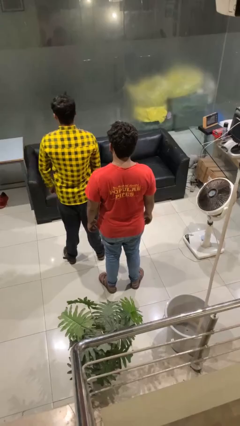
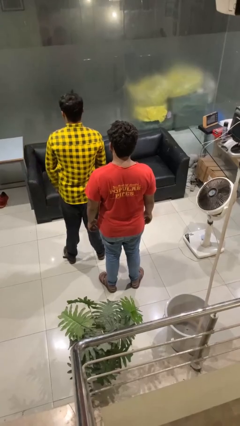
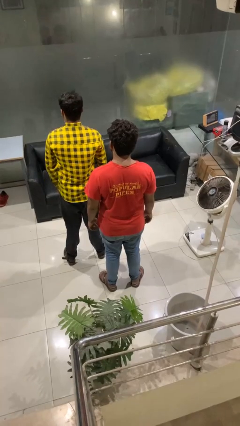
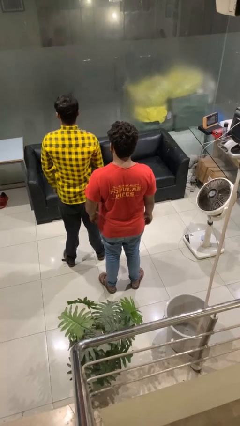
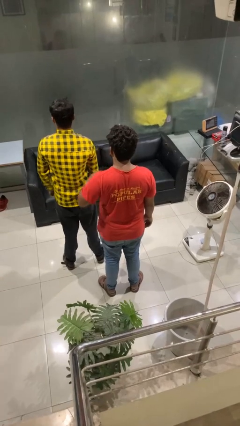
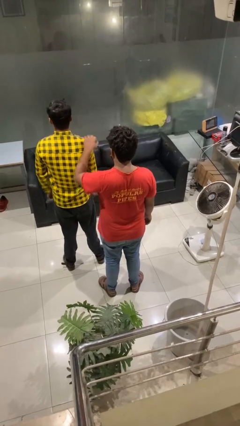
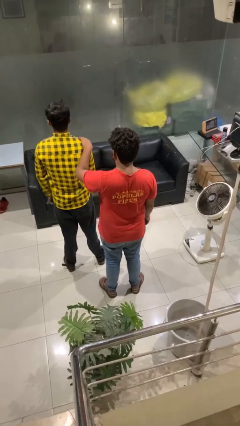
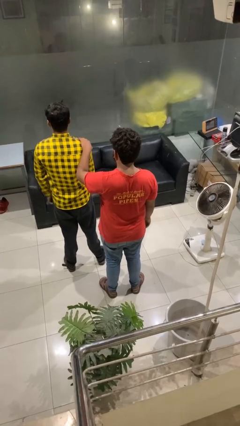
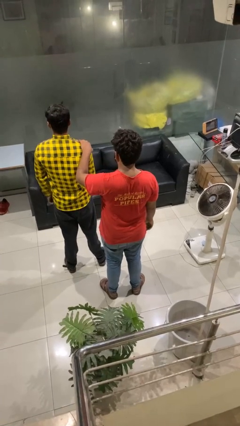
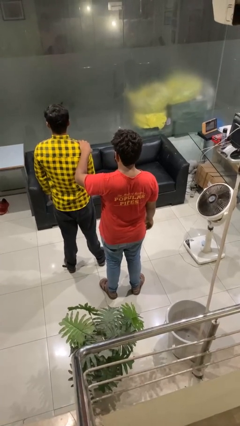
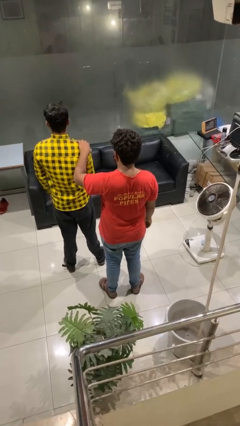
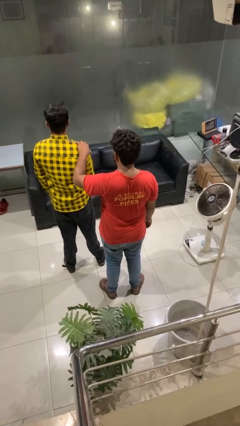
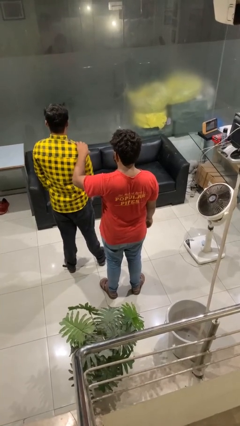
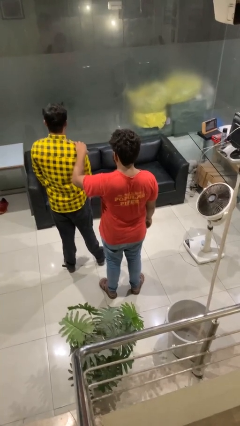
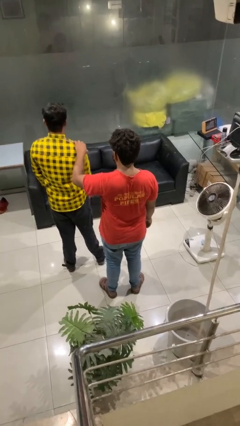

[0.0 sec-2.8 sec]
person grabs person by shoulder

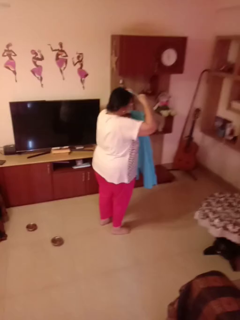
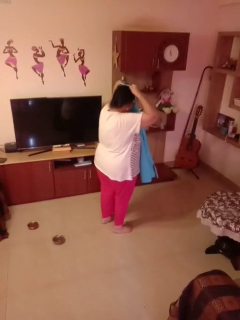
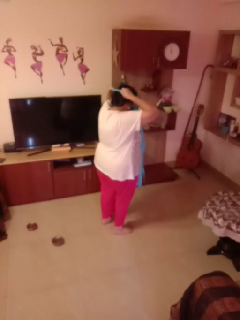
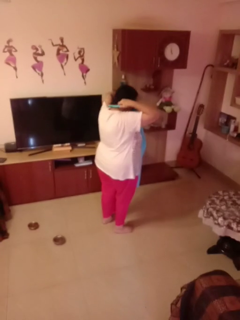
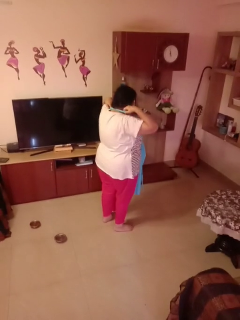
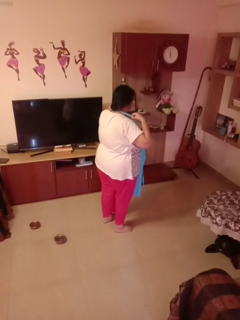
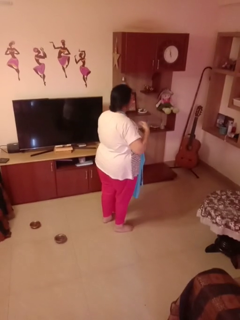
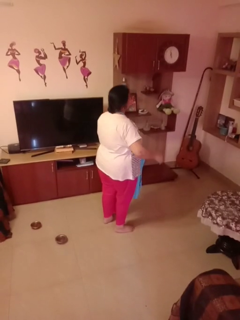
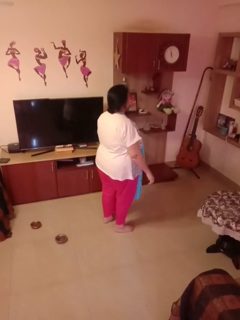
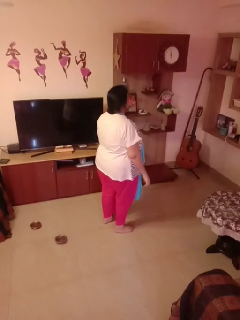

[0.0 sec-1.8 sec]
person puts on apron

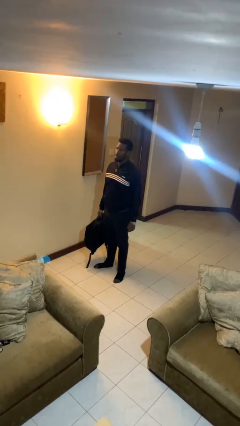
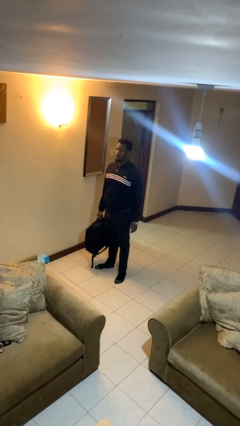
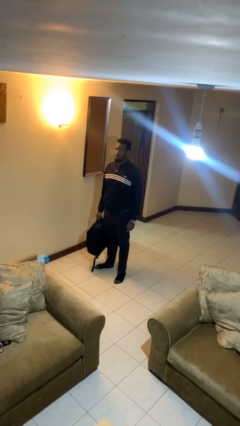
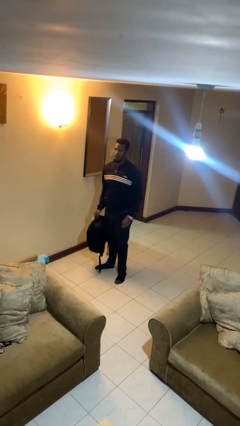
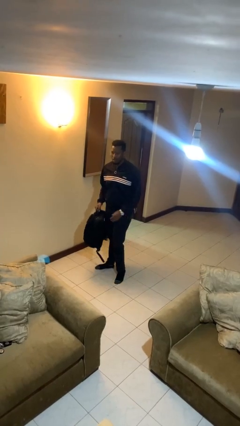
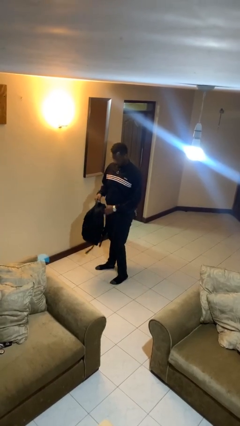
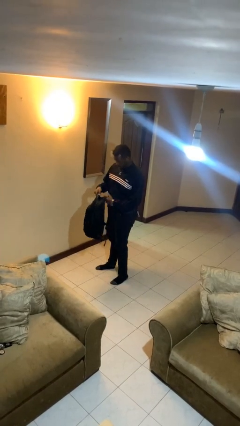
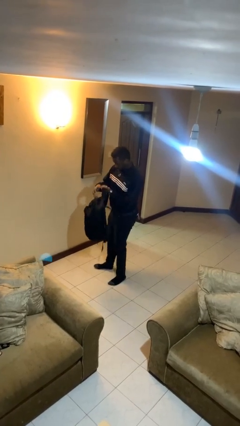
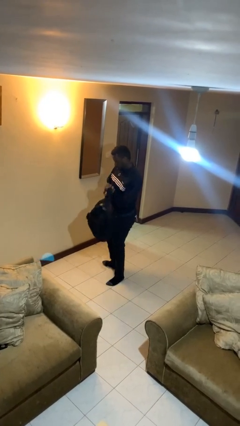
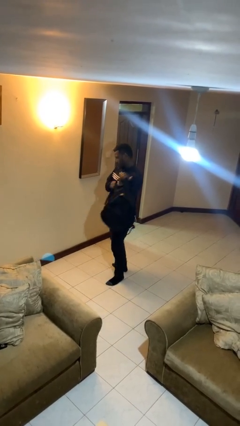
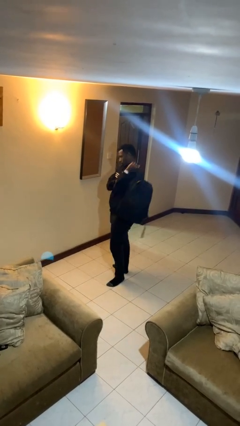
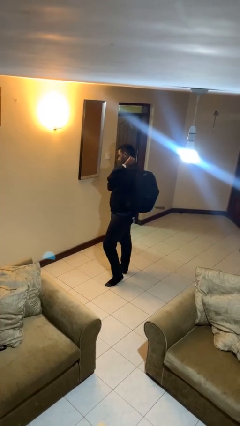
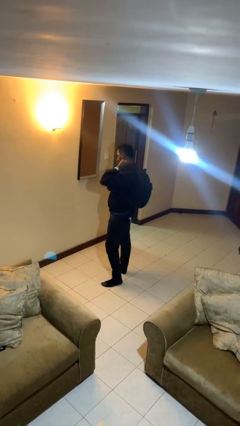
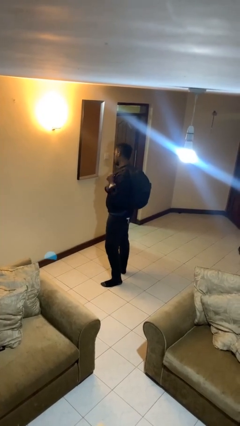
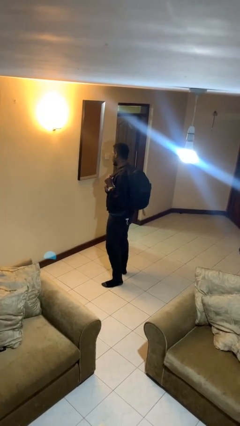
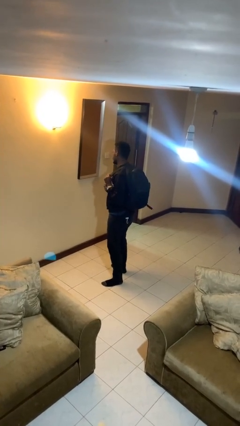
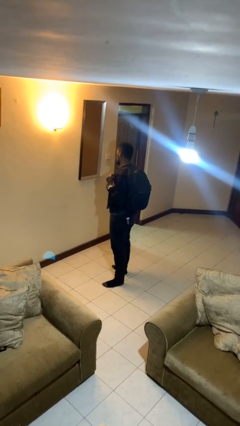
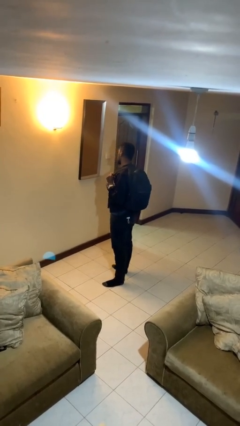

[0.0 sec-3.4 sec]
person puts on backpack

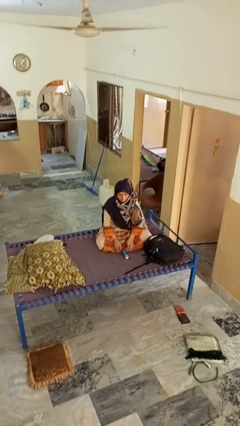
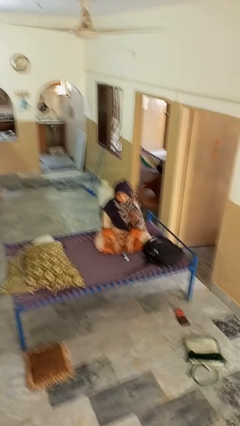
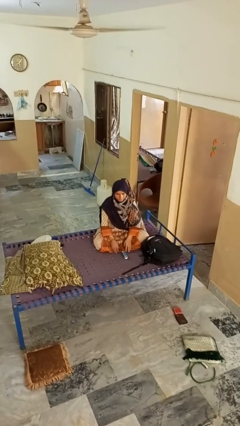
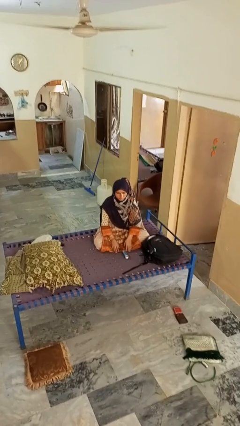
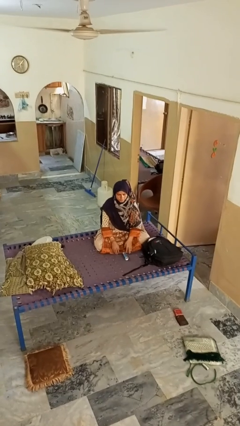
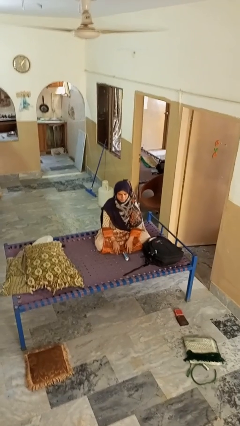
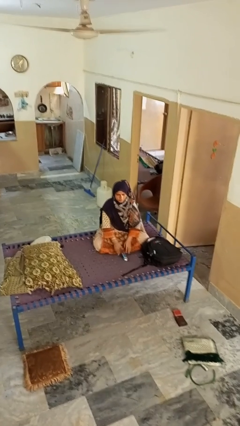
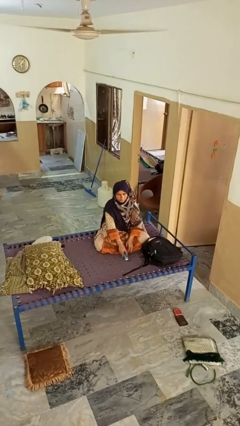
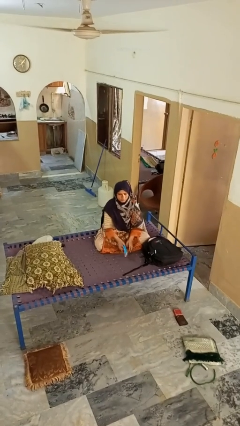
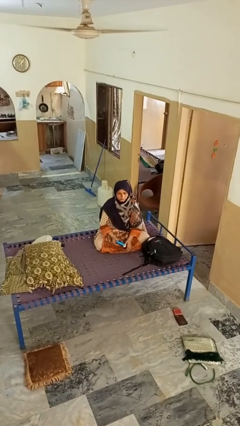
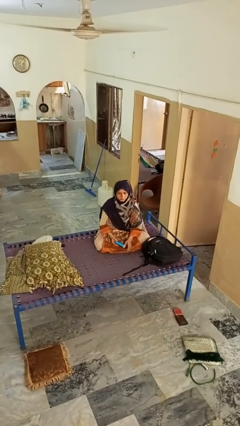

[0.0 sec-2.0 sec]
person picks up object from floor

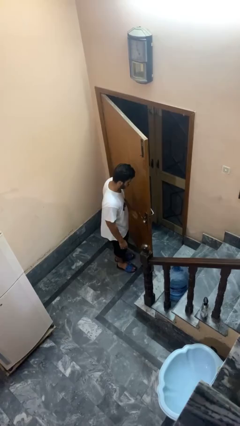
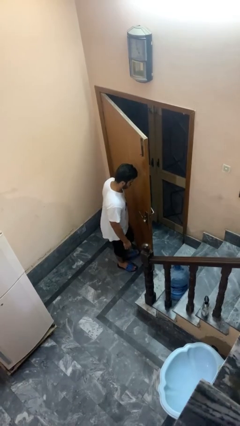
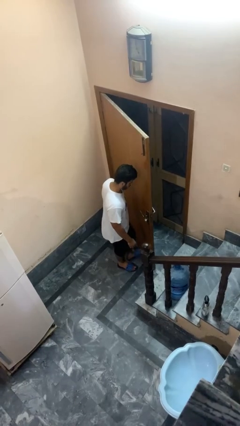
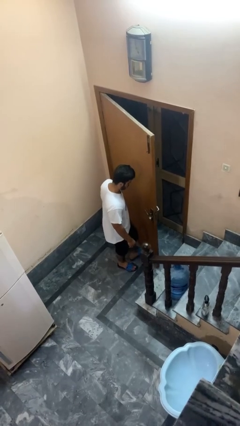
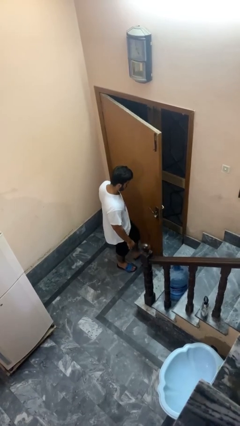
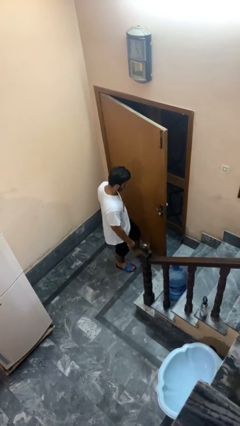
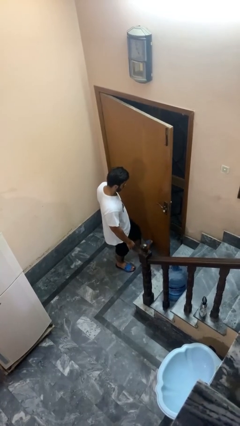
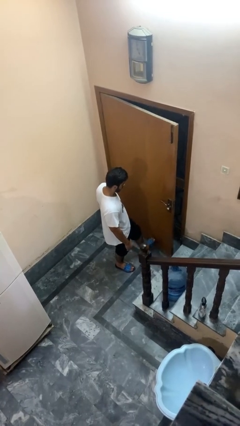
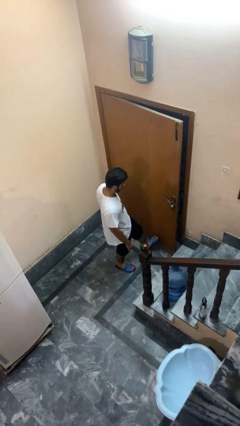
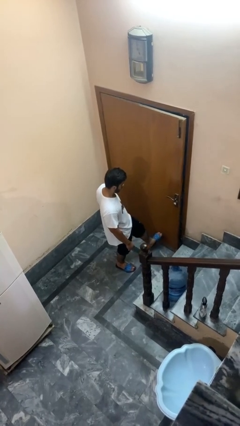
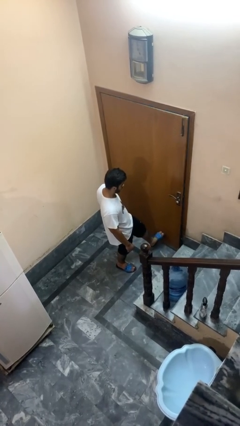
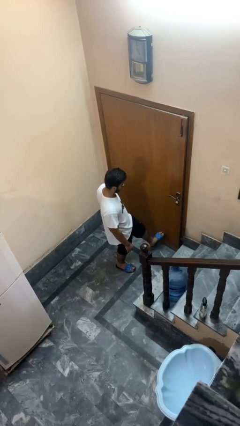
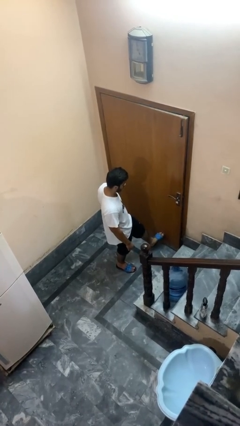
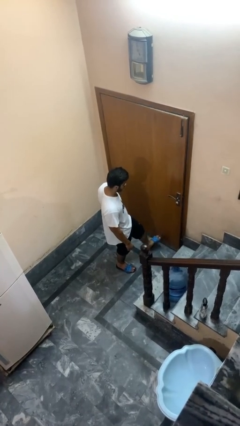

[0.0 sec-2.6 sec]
person closes door with foot

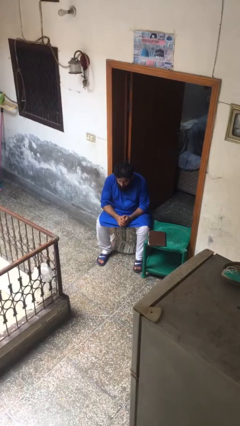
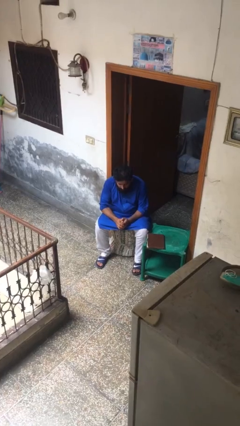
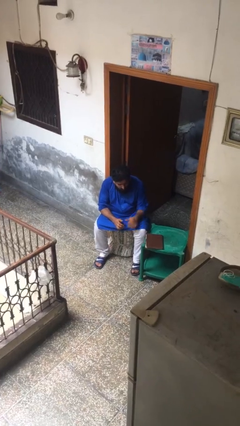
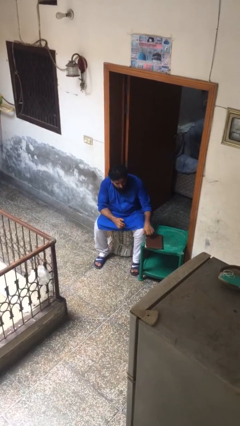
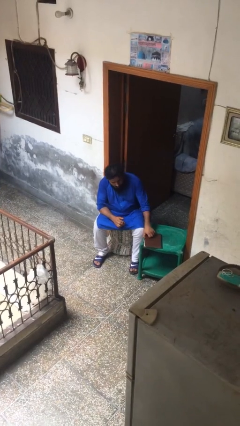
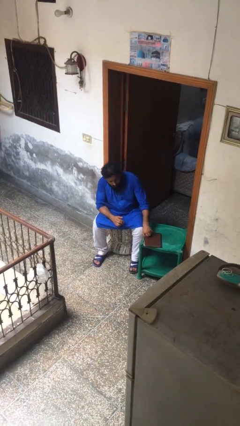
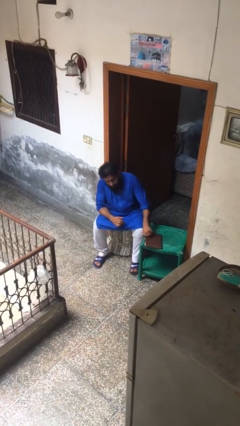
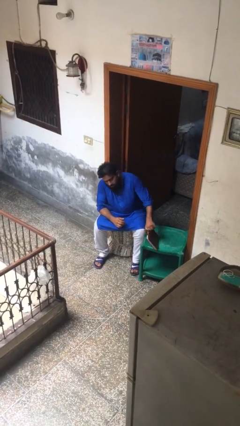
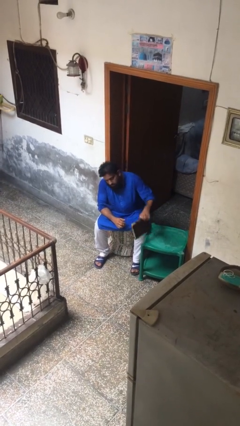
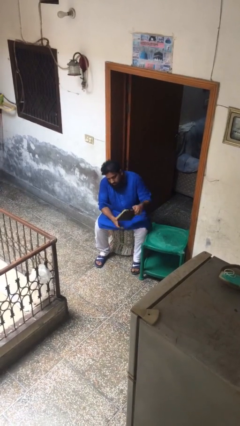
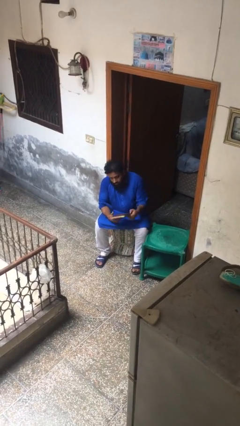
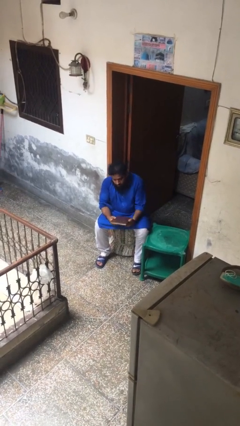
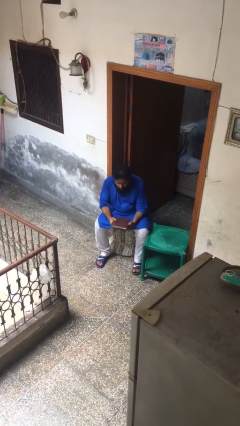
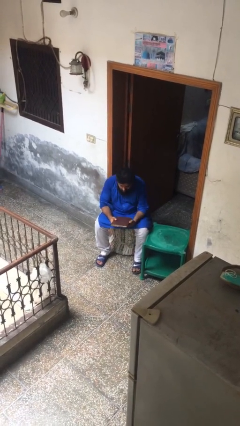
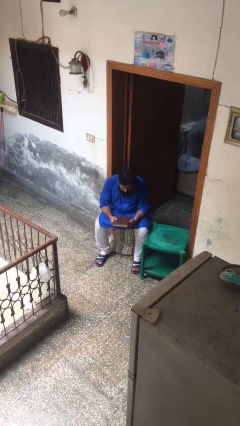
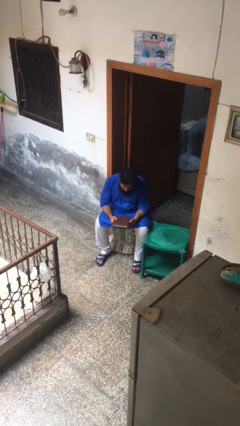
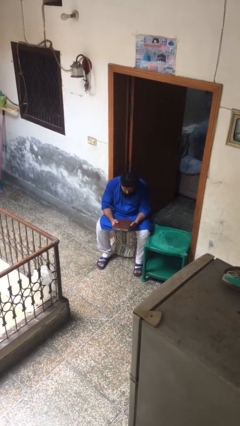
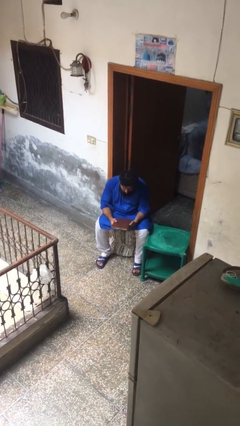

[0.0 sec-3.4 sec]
person picks up object from table

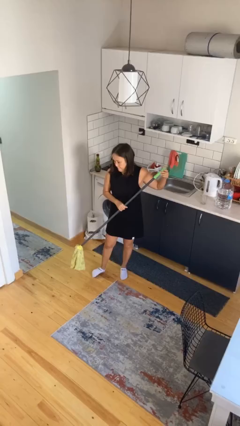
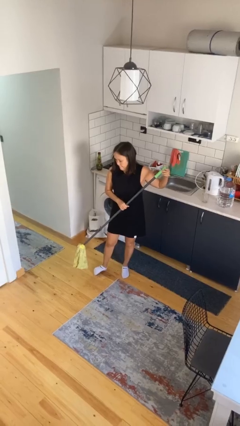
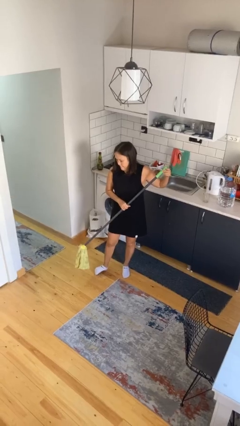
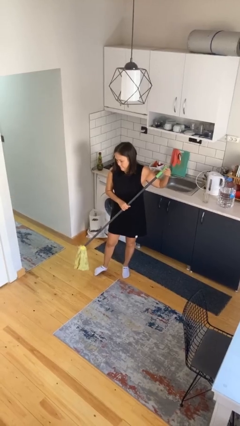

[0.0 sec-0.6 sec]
person sweeps floor

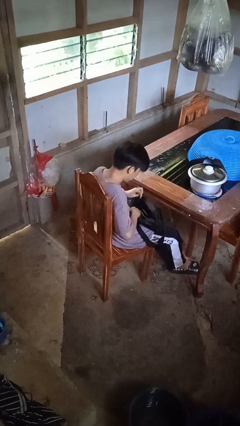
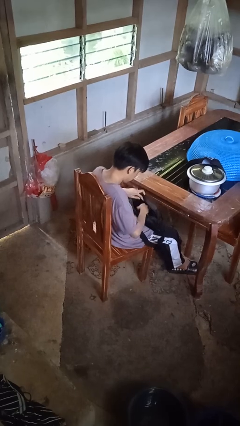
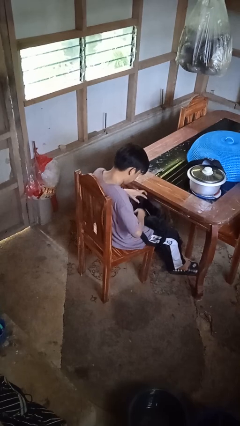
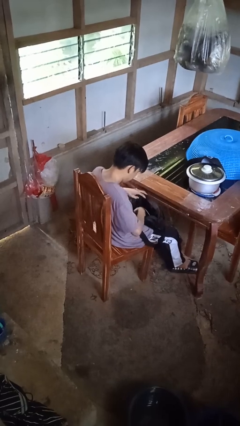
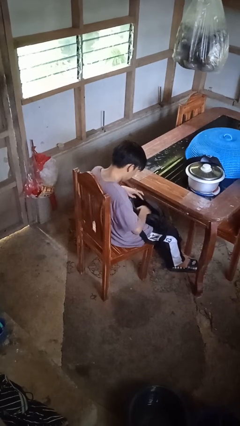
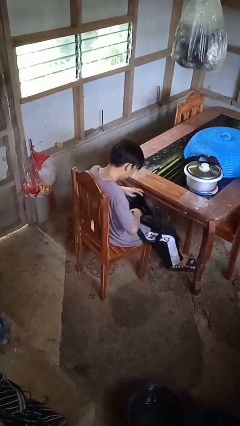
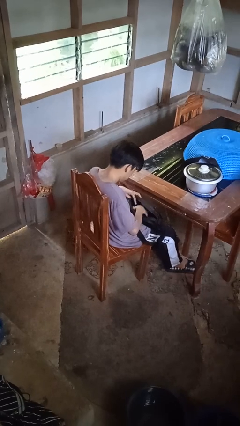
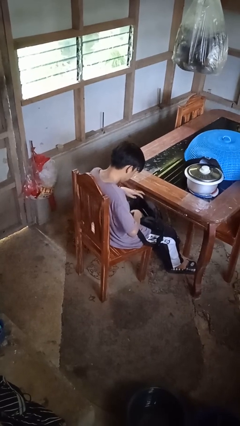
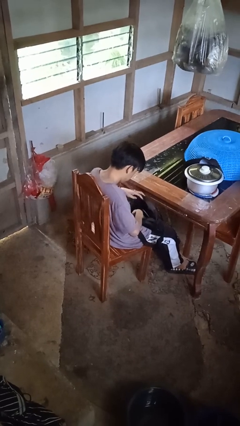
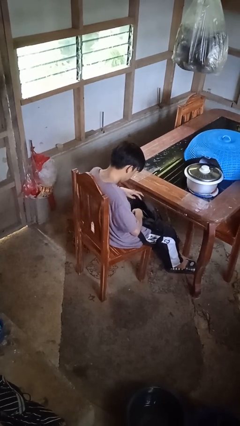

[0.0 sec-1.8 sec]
person searches in purse
